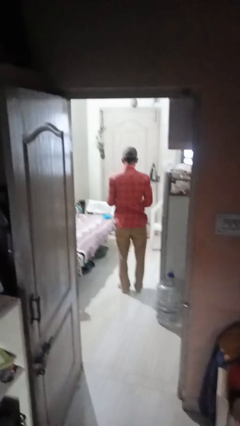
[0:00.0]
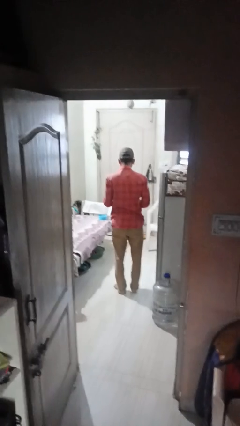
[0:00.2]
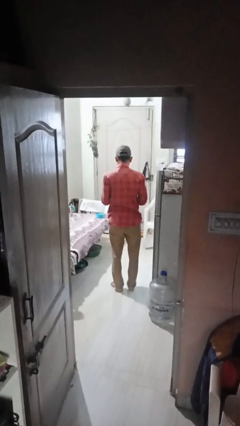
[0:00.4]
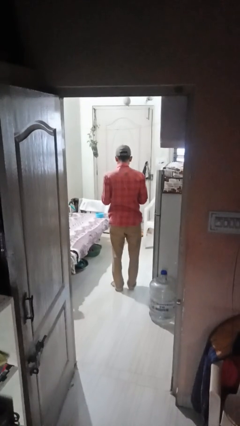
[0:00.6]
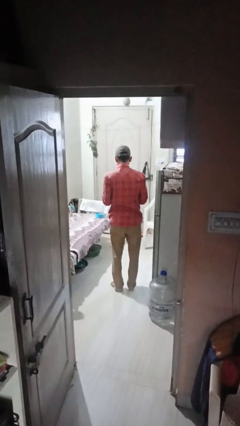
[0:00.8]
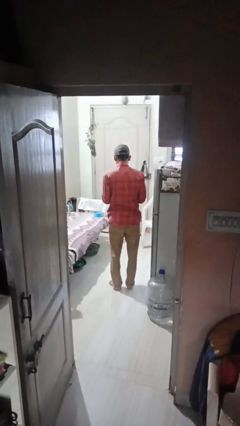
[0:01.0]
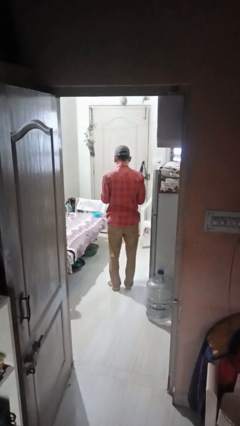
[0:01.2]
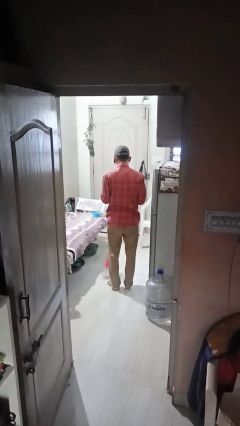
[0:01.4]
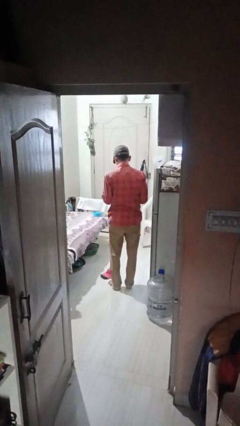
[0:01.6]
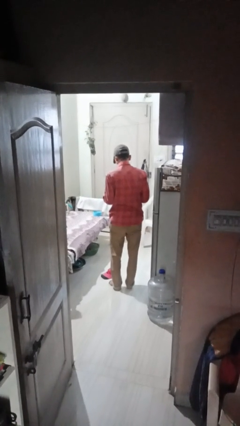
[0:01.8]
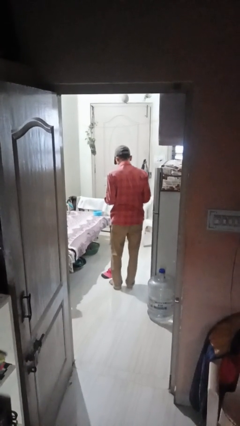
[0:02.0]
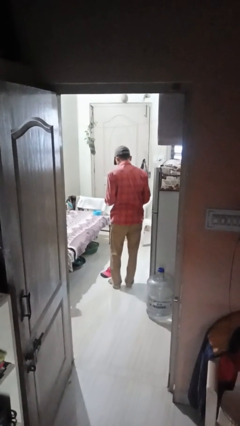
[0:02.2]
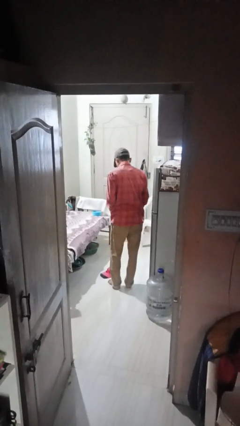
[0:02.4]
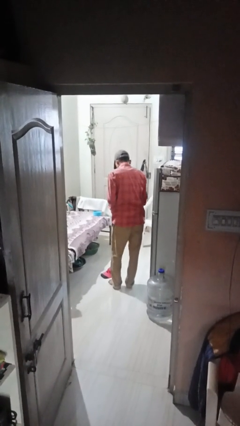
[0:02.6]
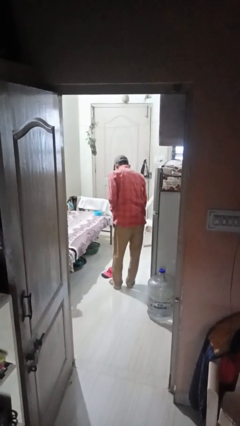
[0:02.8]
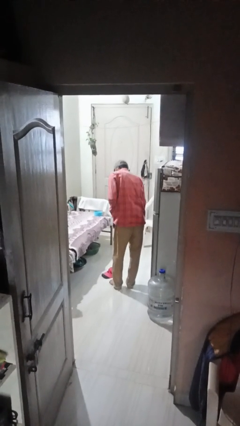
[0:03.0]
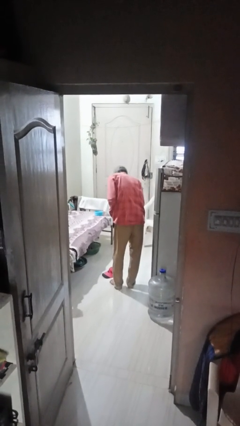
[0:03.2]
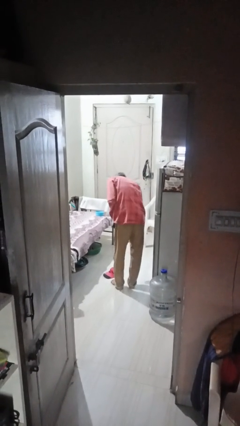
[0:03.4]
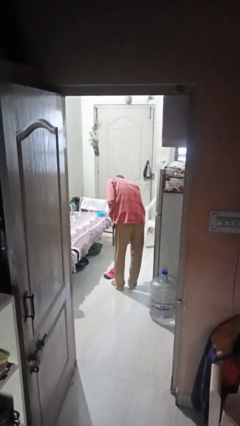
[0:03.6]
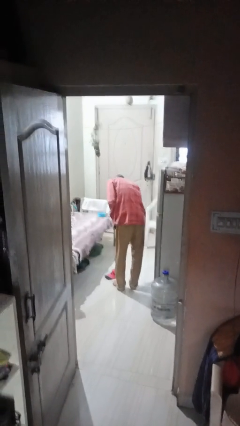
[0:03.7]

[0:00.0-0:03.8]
person drops object

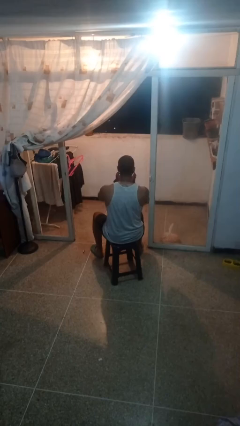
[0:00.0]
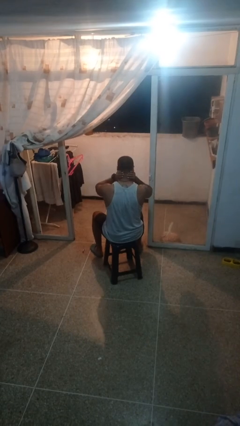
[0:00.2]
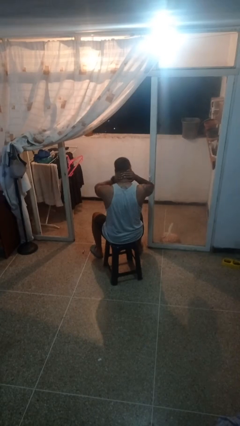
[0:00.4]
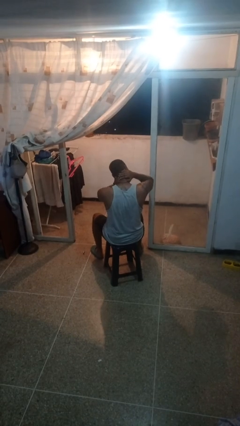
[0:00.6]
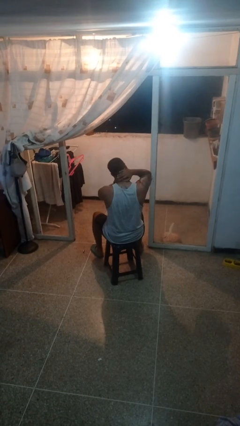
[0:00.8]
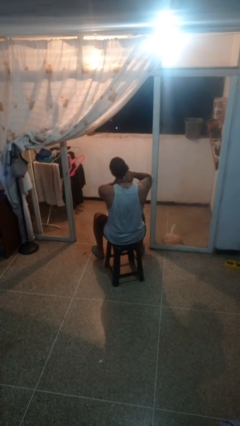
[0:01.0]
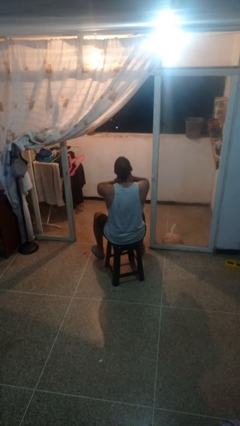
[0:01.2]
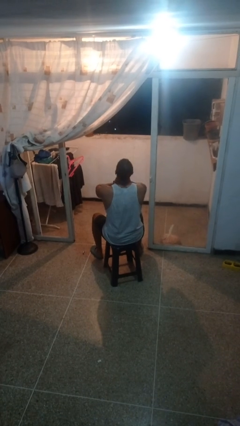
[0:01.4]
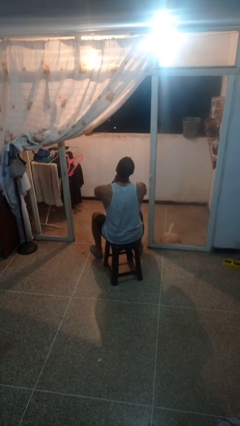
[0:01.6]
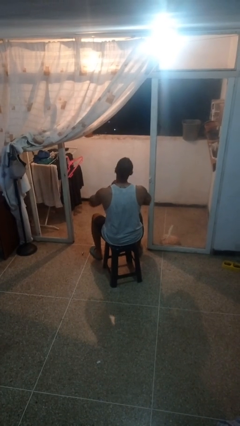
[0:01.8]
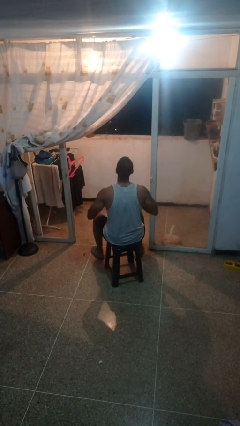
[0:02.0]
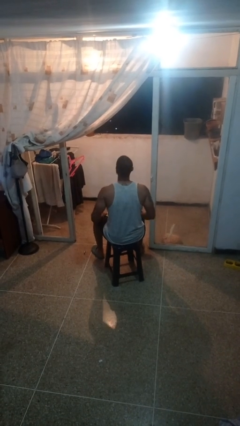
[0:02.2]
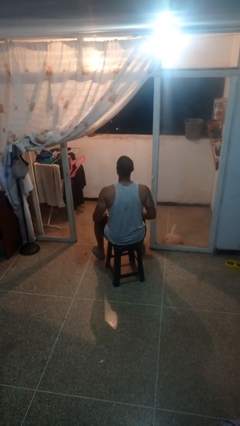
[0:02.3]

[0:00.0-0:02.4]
person rubs neck

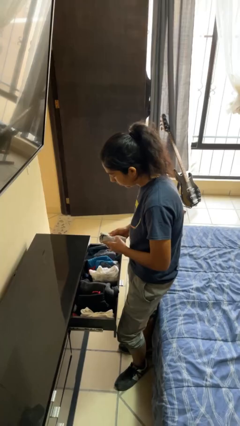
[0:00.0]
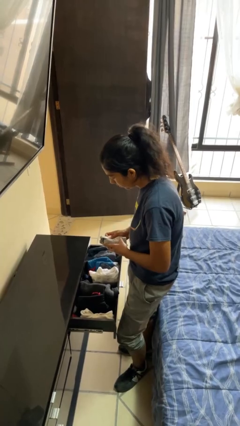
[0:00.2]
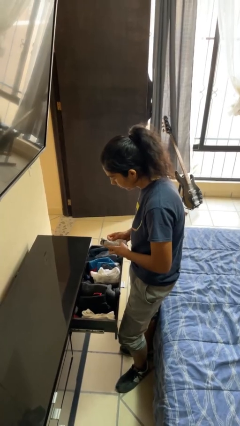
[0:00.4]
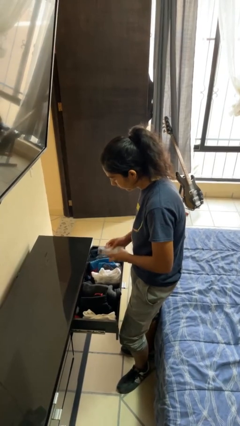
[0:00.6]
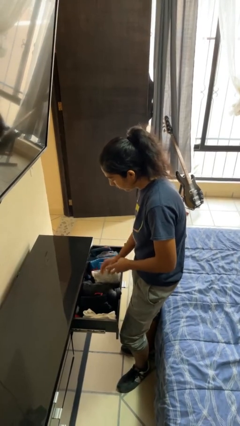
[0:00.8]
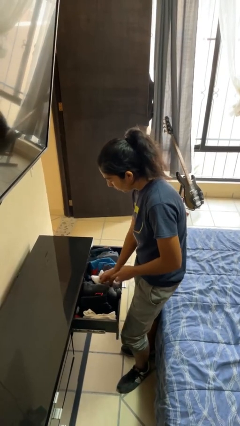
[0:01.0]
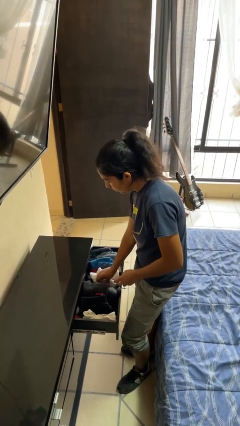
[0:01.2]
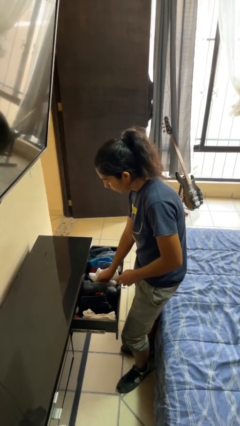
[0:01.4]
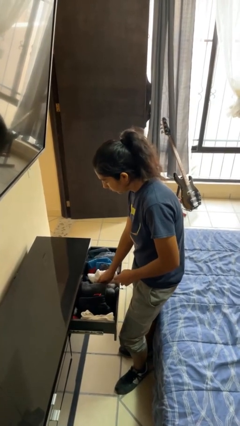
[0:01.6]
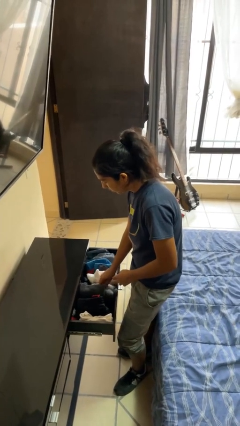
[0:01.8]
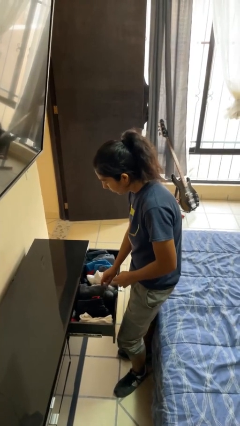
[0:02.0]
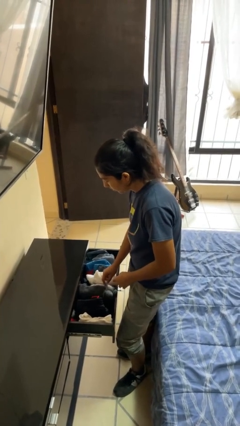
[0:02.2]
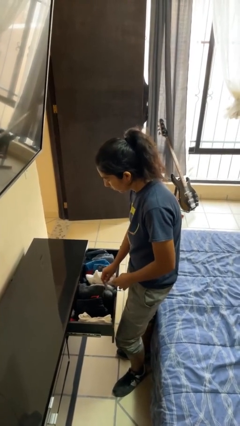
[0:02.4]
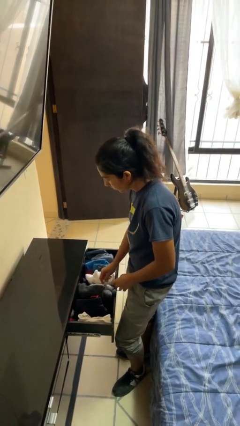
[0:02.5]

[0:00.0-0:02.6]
person puts clothes into dresser

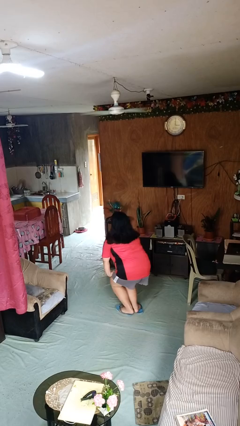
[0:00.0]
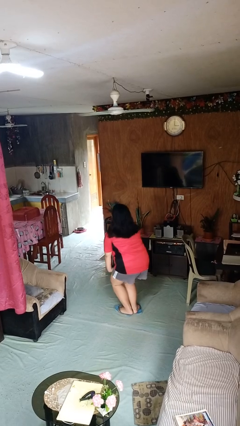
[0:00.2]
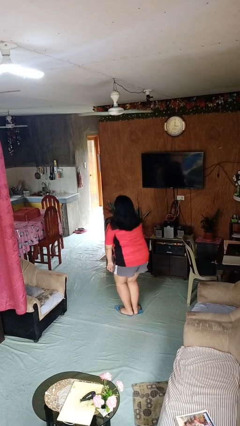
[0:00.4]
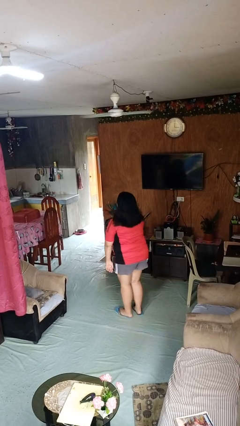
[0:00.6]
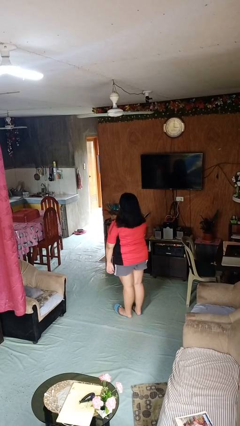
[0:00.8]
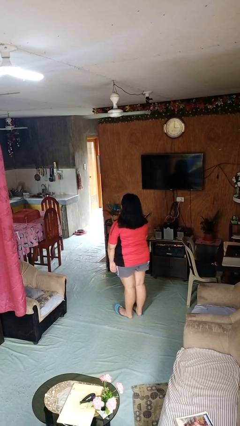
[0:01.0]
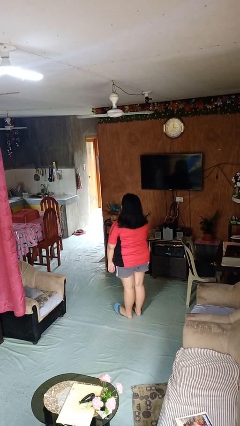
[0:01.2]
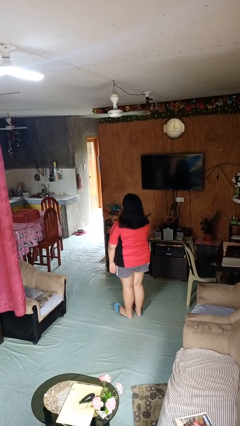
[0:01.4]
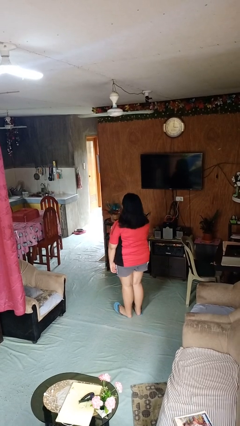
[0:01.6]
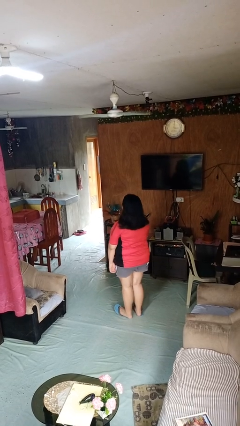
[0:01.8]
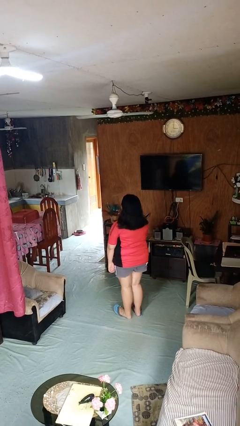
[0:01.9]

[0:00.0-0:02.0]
person stands up

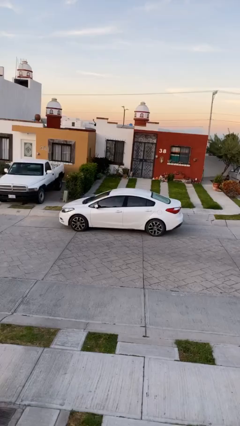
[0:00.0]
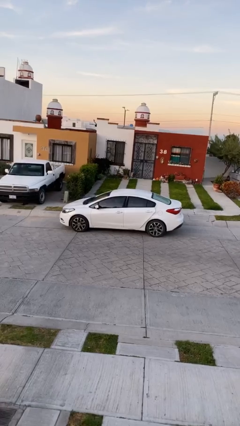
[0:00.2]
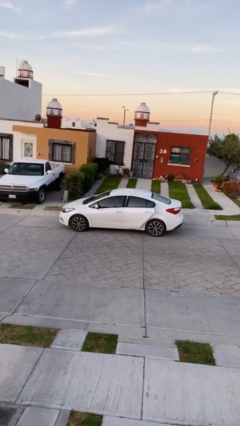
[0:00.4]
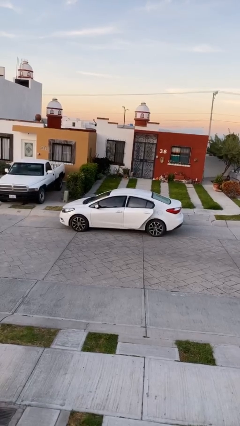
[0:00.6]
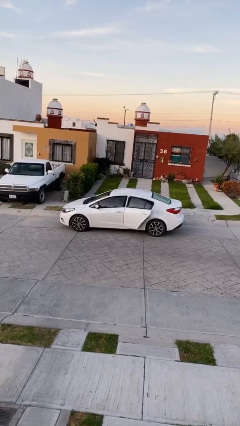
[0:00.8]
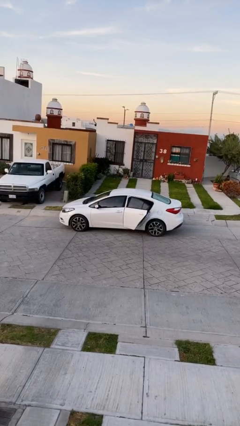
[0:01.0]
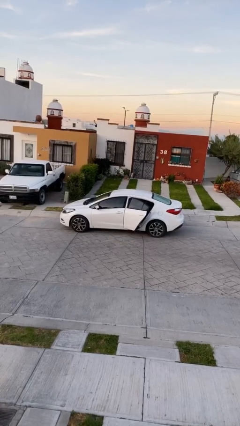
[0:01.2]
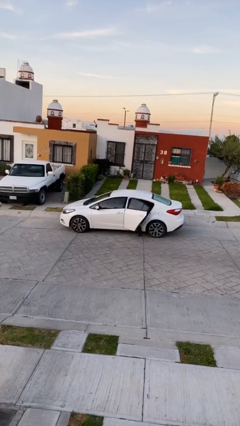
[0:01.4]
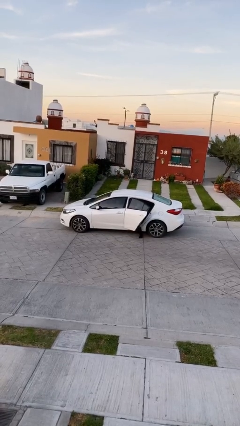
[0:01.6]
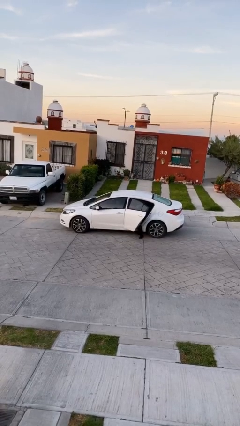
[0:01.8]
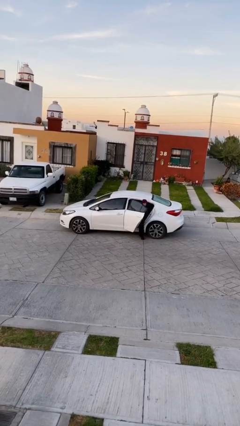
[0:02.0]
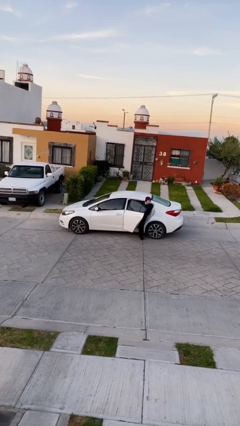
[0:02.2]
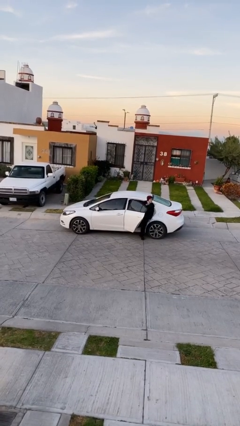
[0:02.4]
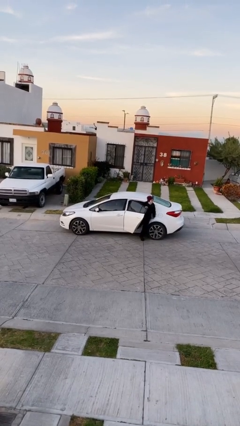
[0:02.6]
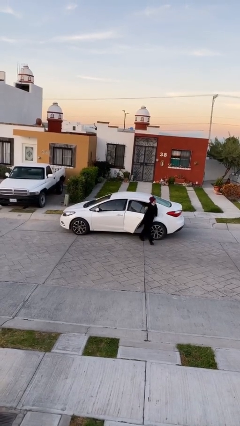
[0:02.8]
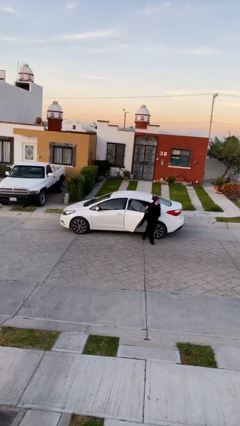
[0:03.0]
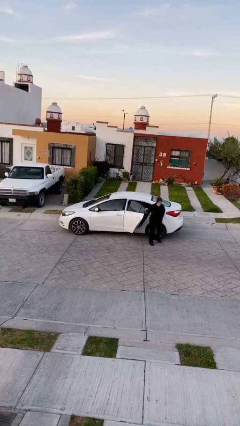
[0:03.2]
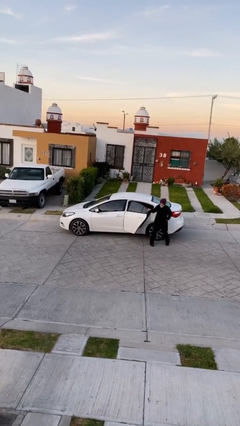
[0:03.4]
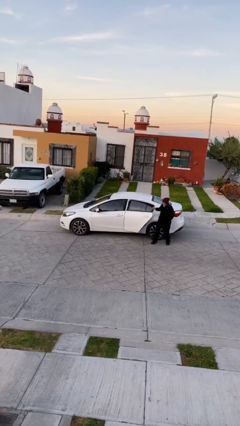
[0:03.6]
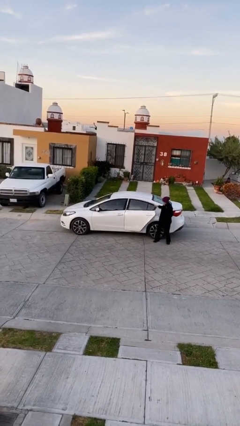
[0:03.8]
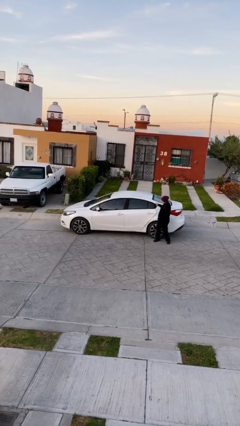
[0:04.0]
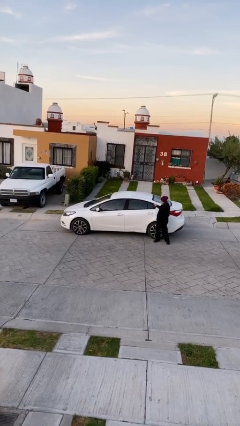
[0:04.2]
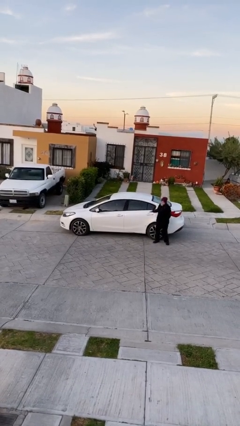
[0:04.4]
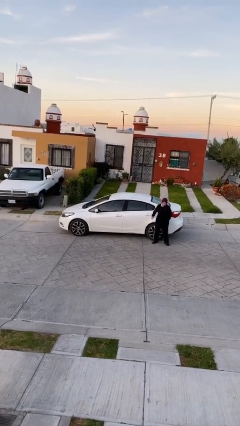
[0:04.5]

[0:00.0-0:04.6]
car drops off person

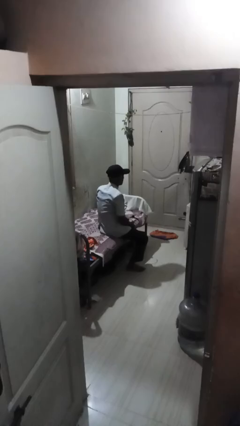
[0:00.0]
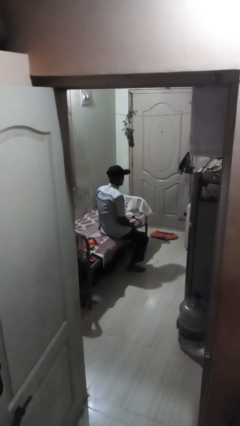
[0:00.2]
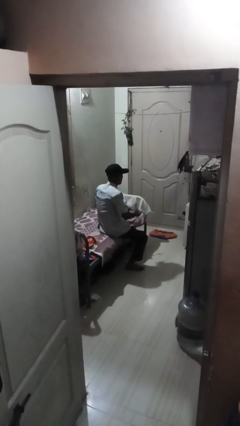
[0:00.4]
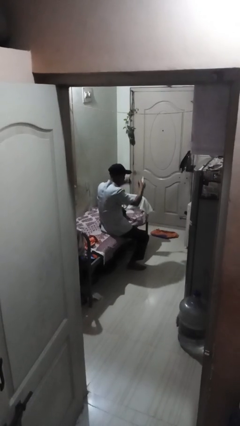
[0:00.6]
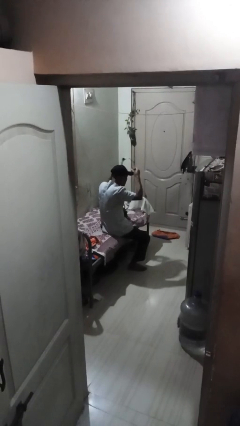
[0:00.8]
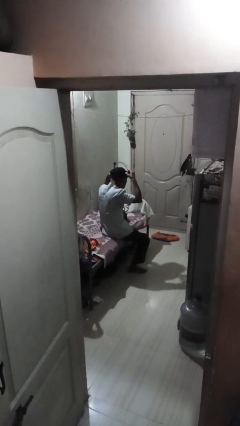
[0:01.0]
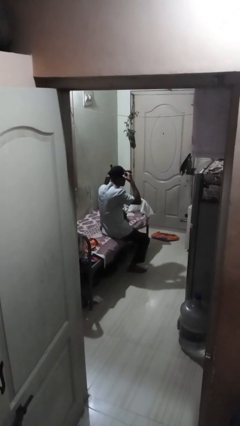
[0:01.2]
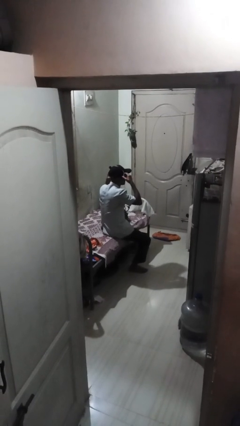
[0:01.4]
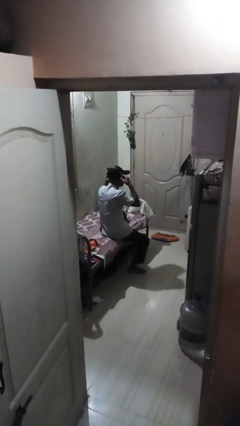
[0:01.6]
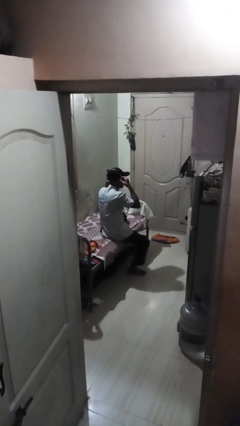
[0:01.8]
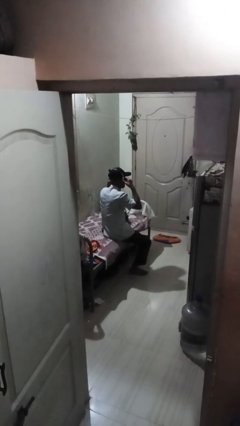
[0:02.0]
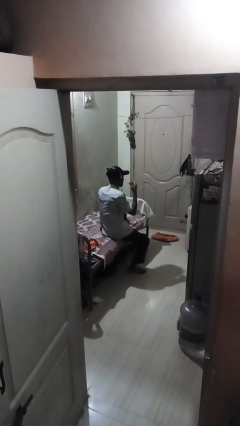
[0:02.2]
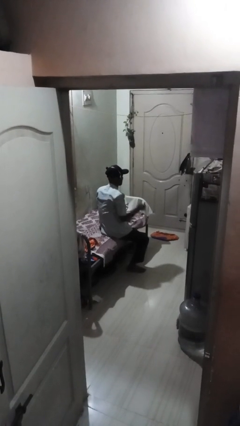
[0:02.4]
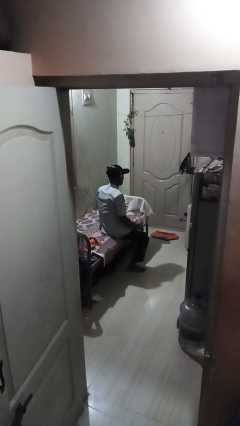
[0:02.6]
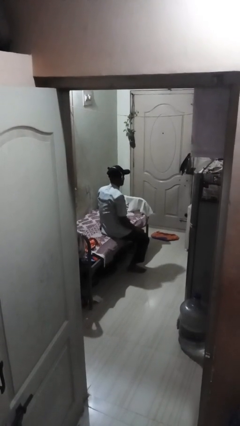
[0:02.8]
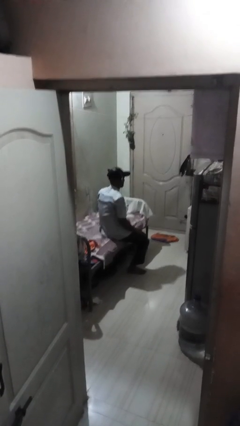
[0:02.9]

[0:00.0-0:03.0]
person puts on headphones
